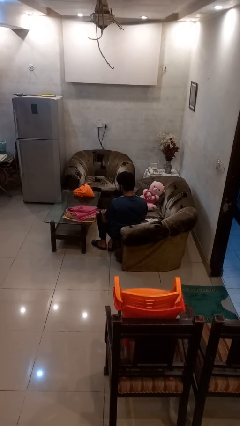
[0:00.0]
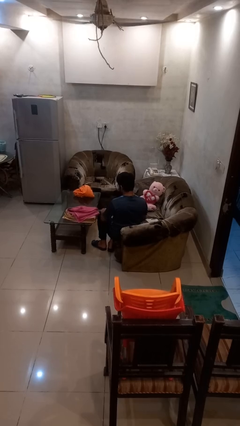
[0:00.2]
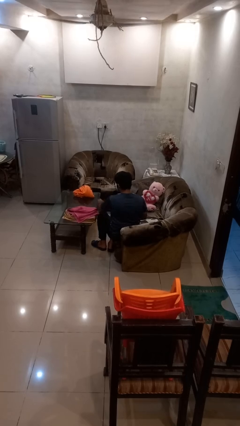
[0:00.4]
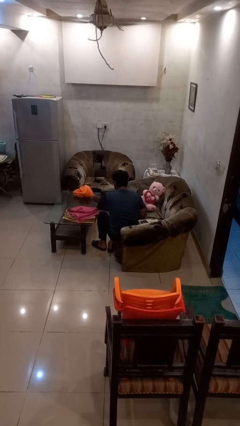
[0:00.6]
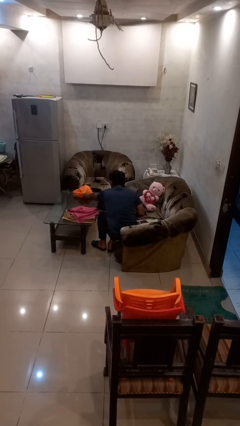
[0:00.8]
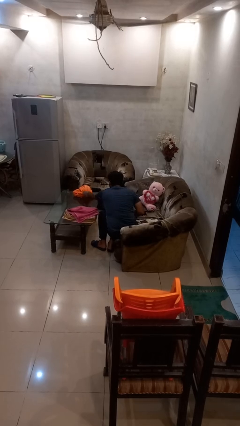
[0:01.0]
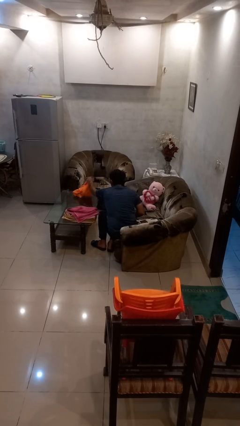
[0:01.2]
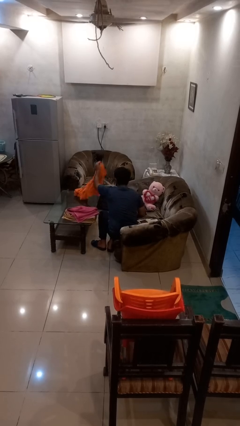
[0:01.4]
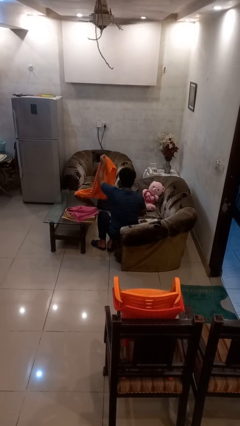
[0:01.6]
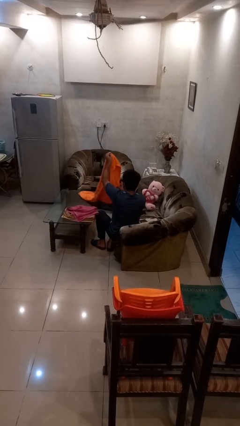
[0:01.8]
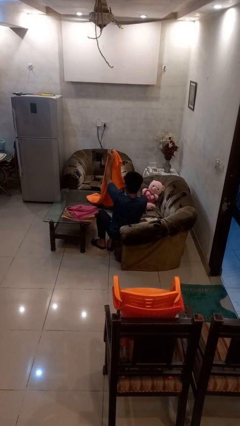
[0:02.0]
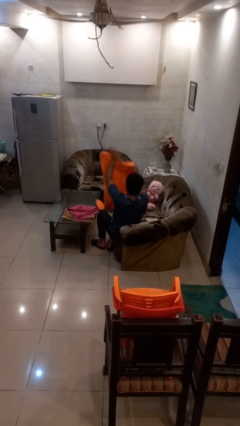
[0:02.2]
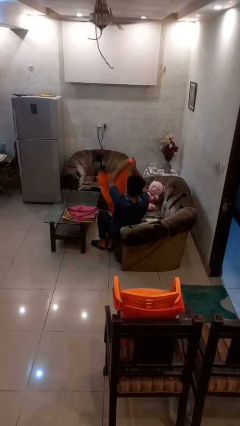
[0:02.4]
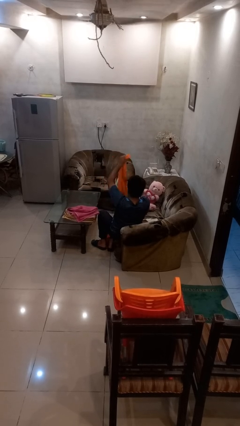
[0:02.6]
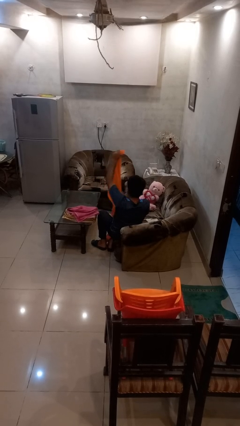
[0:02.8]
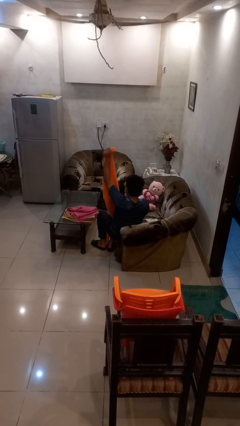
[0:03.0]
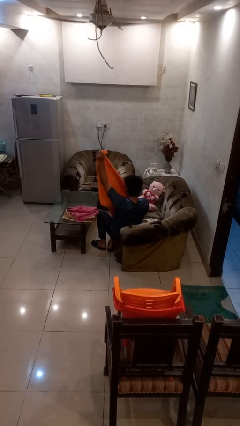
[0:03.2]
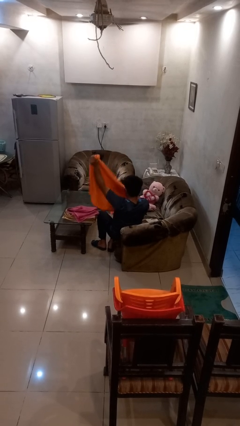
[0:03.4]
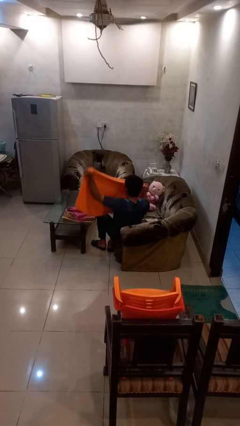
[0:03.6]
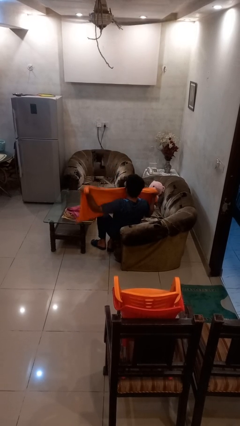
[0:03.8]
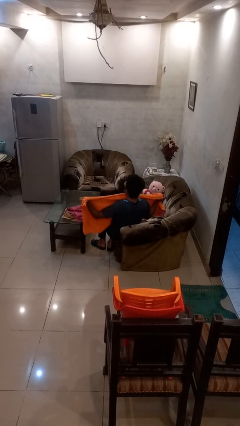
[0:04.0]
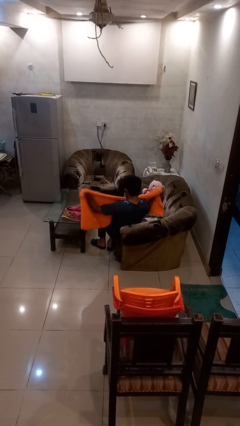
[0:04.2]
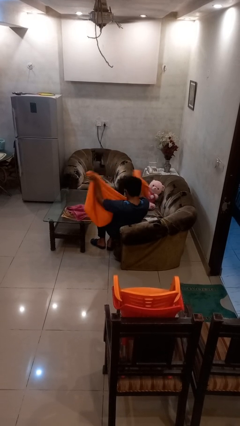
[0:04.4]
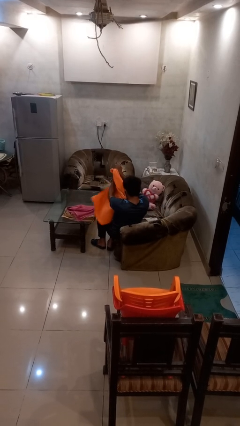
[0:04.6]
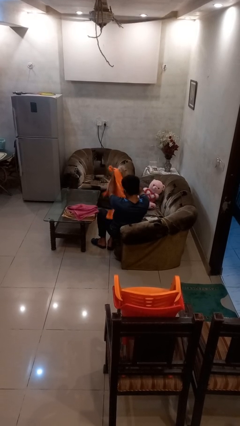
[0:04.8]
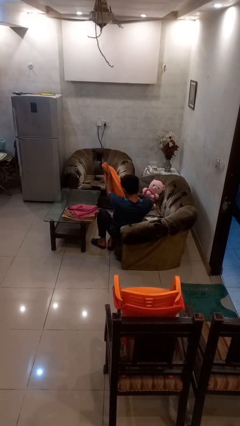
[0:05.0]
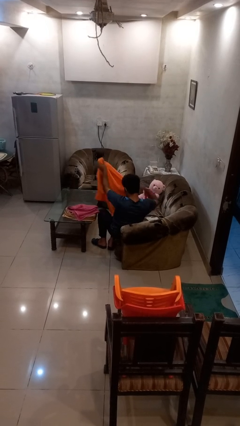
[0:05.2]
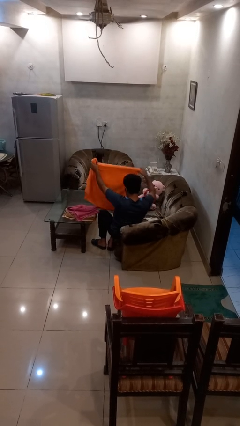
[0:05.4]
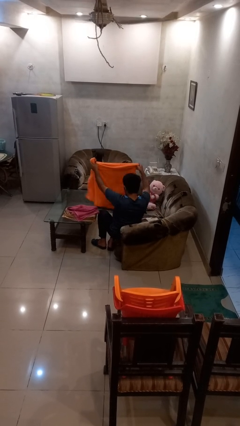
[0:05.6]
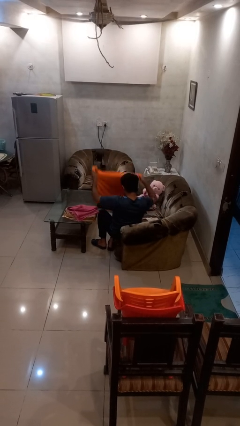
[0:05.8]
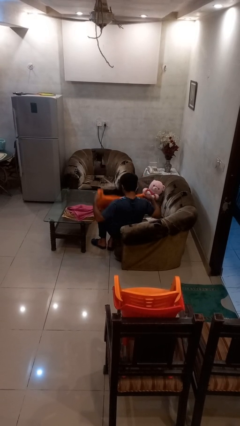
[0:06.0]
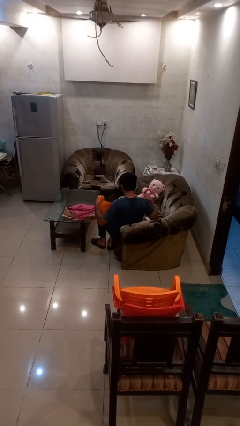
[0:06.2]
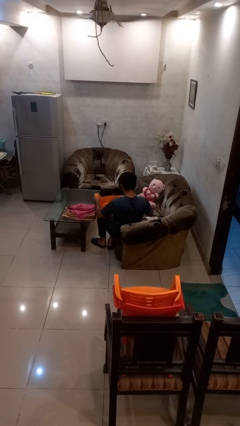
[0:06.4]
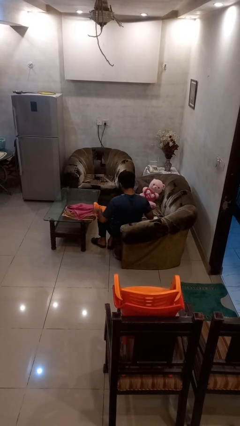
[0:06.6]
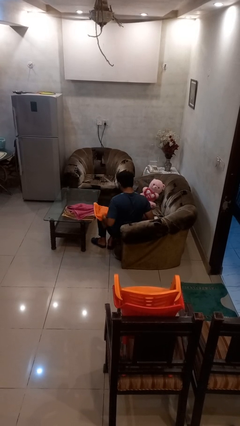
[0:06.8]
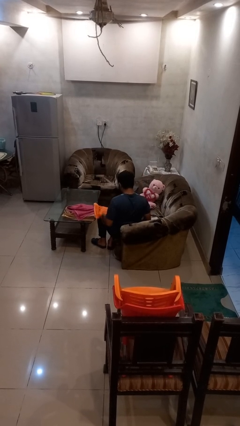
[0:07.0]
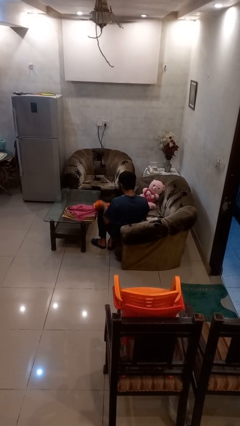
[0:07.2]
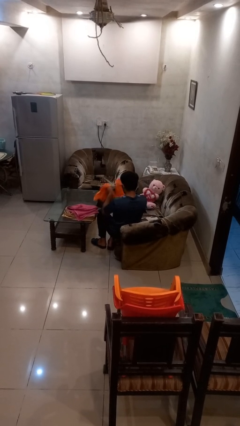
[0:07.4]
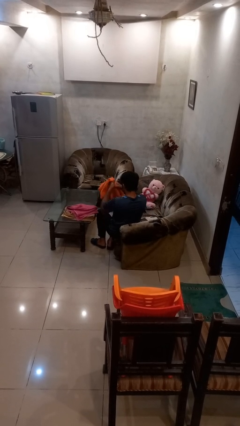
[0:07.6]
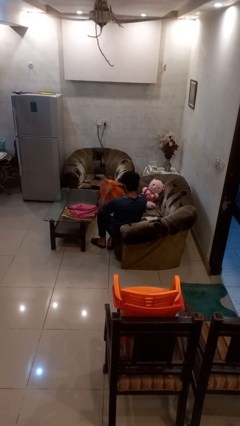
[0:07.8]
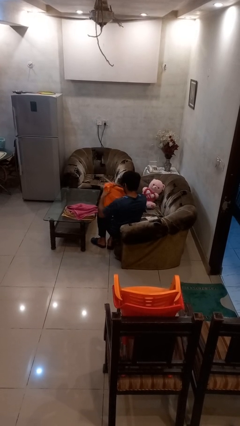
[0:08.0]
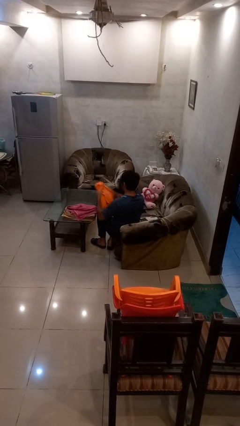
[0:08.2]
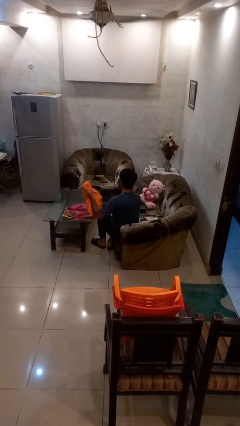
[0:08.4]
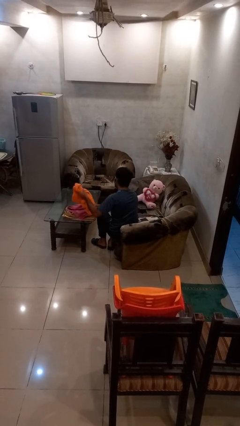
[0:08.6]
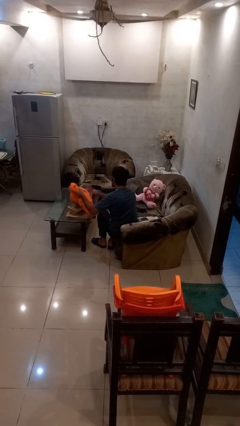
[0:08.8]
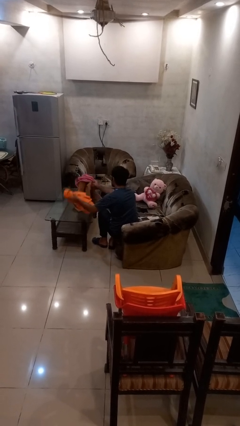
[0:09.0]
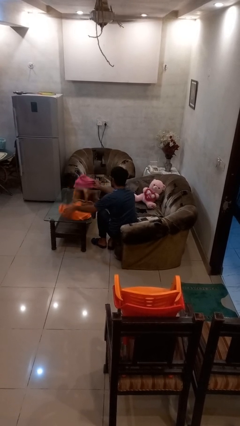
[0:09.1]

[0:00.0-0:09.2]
person folds towel

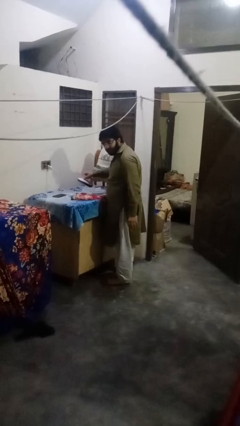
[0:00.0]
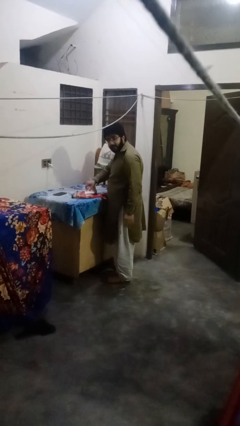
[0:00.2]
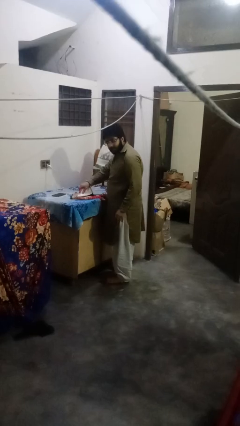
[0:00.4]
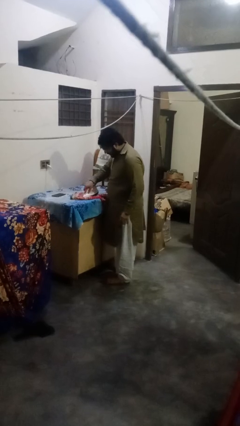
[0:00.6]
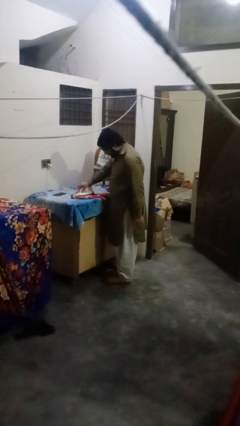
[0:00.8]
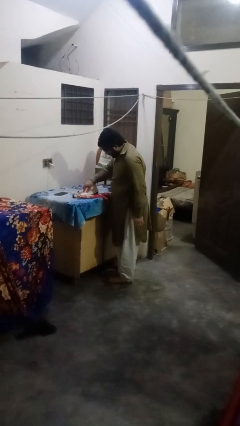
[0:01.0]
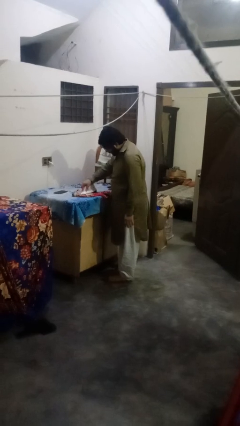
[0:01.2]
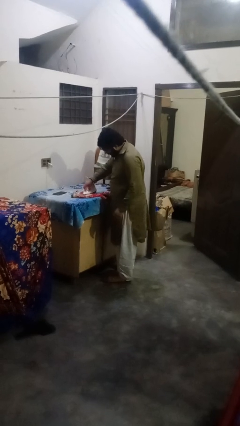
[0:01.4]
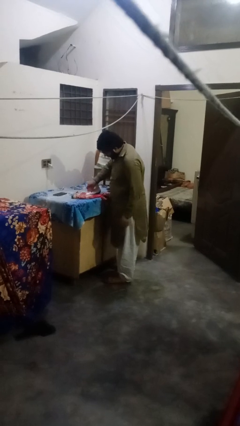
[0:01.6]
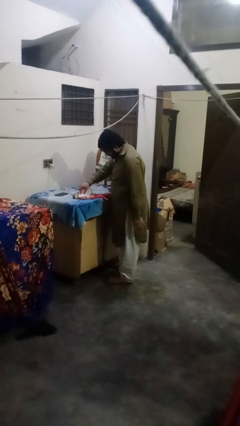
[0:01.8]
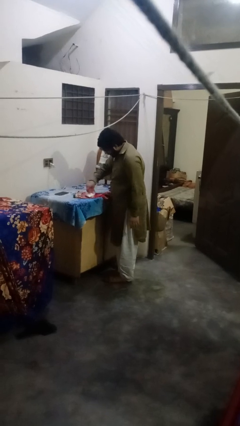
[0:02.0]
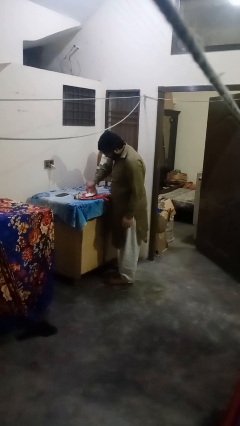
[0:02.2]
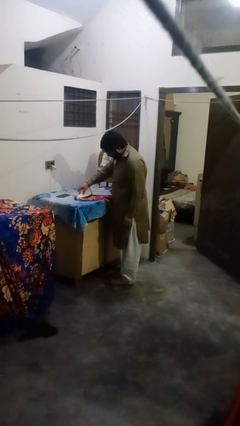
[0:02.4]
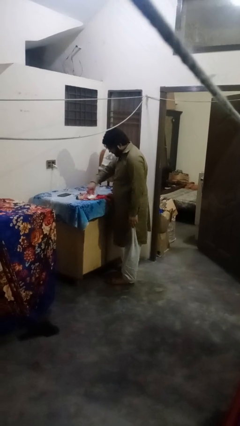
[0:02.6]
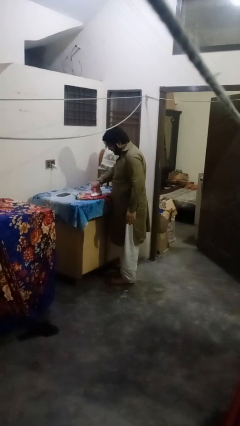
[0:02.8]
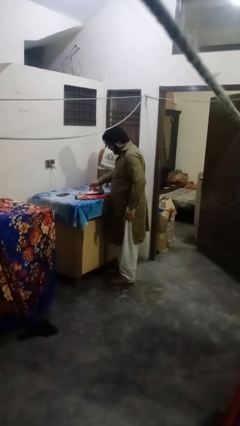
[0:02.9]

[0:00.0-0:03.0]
person irons clothes

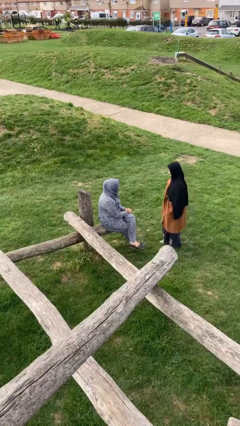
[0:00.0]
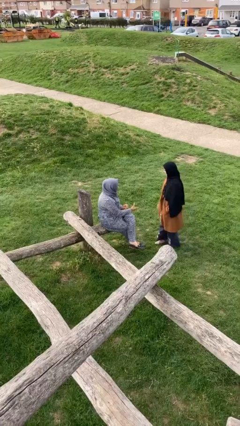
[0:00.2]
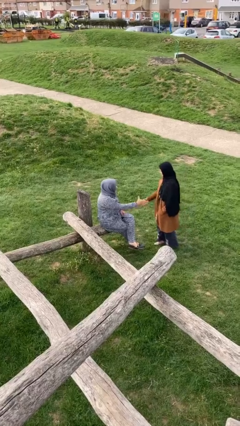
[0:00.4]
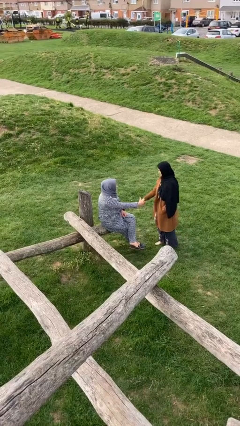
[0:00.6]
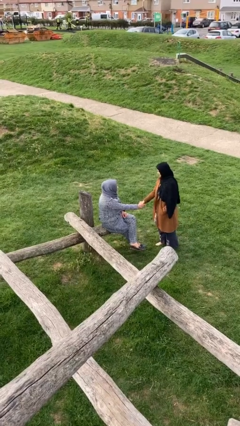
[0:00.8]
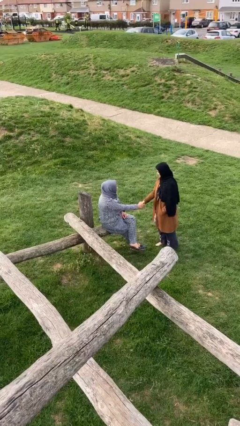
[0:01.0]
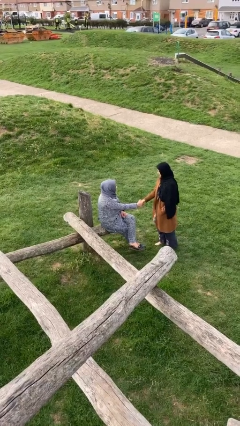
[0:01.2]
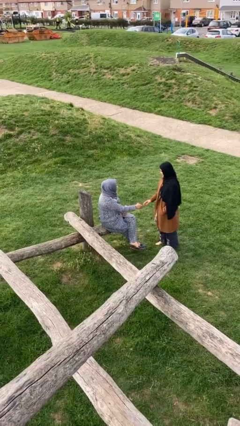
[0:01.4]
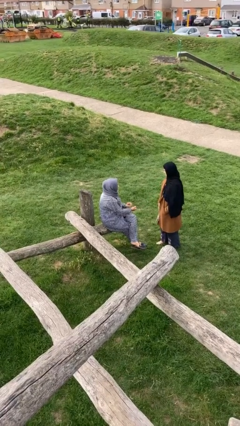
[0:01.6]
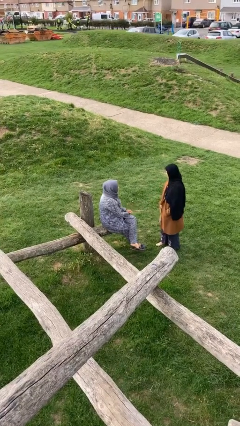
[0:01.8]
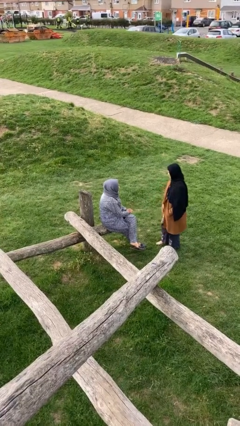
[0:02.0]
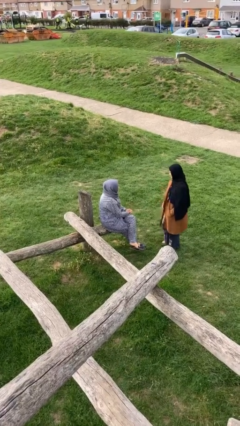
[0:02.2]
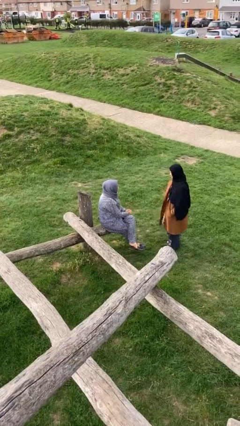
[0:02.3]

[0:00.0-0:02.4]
person shakes hand

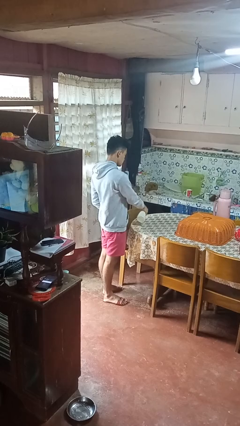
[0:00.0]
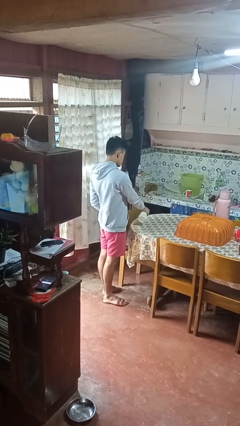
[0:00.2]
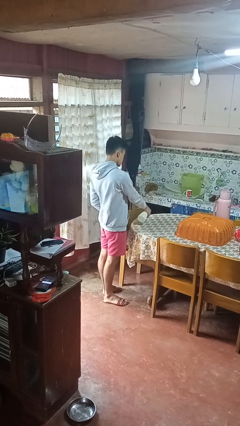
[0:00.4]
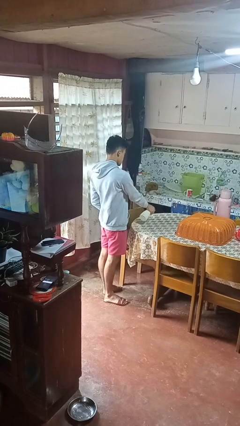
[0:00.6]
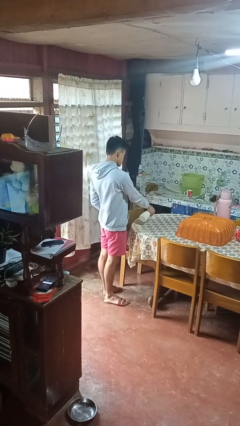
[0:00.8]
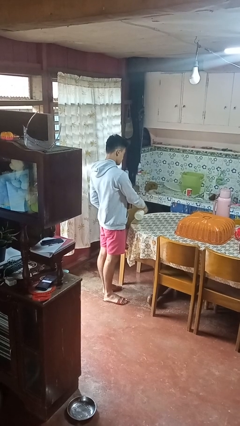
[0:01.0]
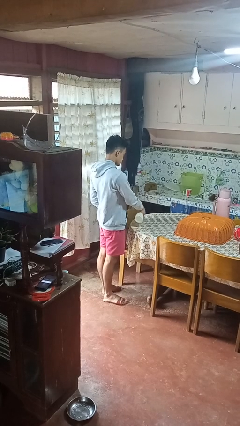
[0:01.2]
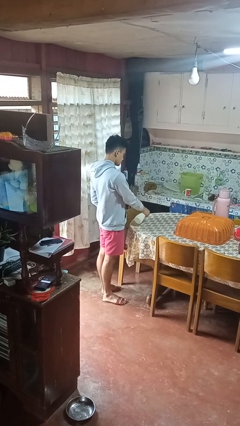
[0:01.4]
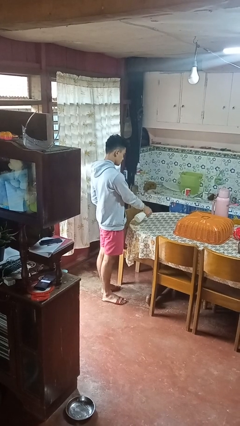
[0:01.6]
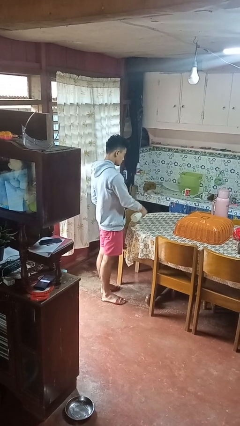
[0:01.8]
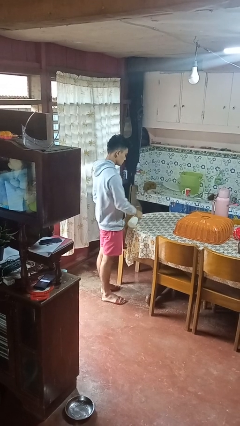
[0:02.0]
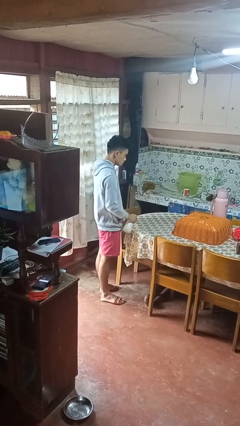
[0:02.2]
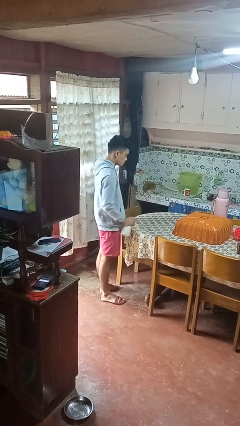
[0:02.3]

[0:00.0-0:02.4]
person sprays from bottle

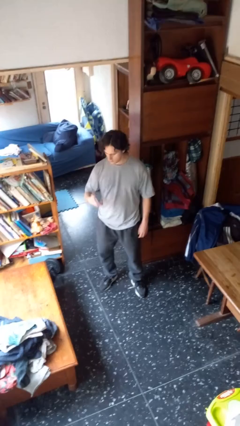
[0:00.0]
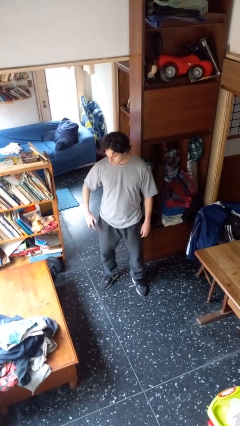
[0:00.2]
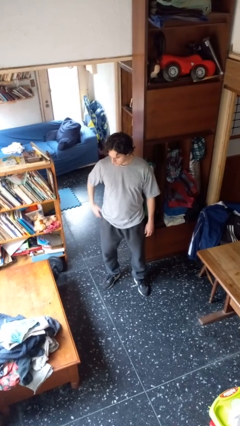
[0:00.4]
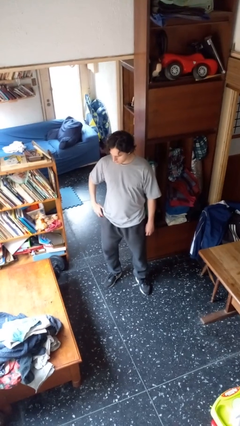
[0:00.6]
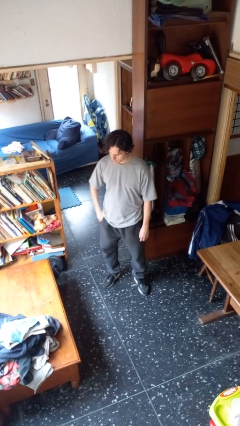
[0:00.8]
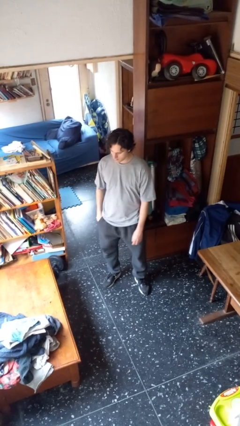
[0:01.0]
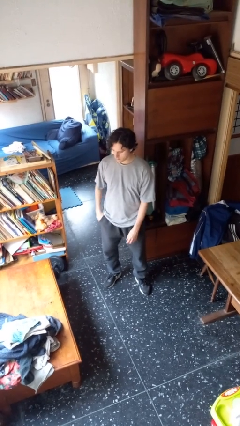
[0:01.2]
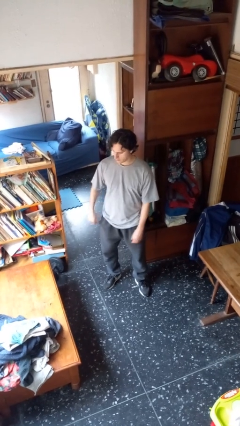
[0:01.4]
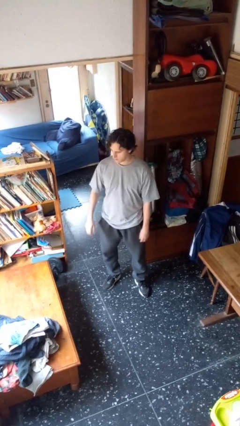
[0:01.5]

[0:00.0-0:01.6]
person puts phone into pocket
